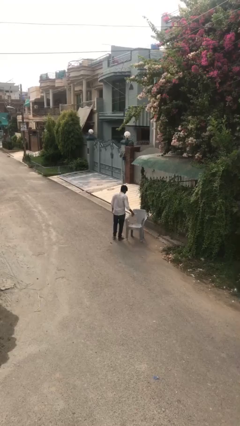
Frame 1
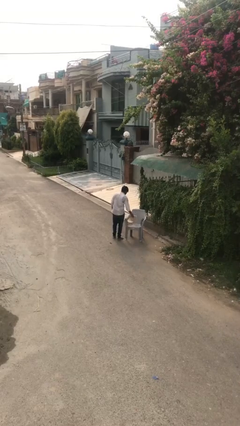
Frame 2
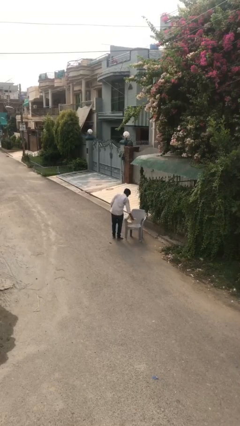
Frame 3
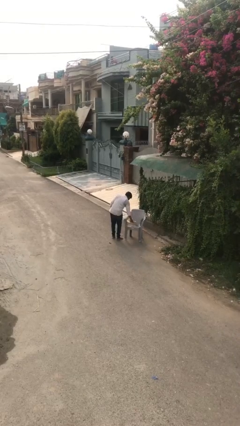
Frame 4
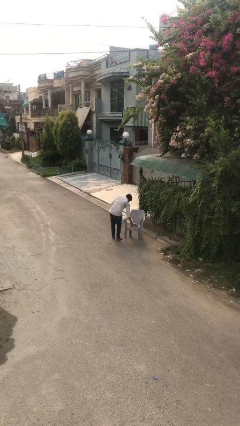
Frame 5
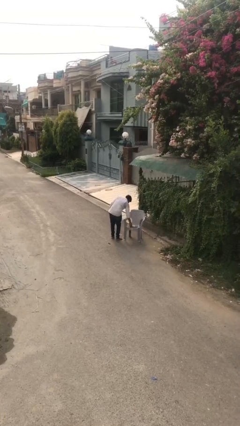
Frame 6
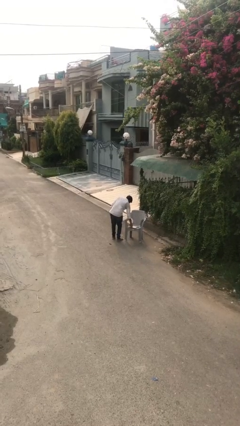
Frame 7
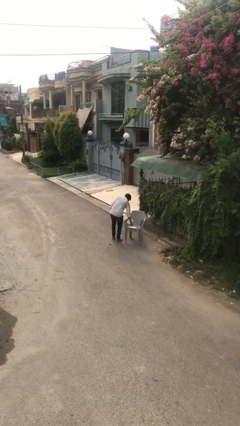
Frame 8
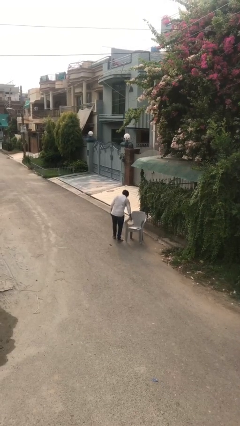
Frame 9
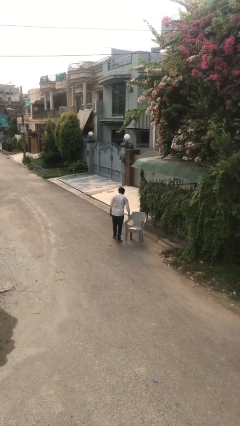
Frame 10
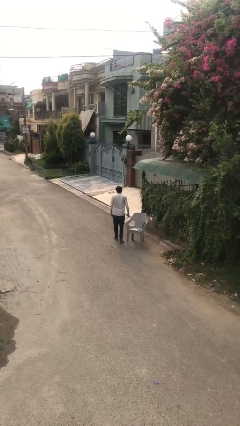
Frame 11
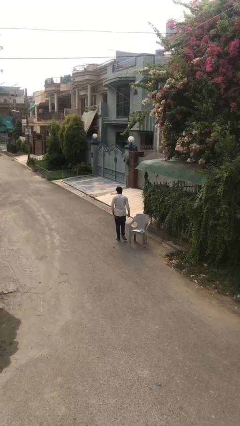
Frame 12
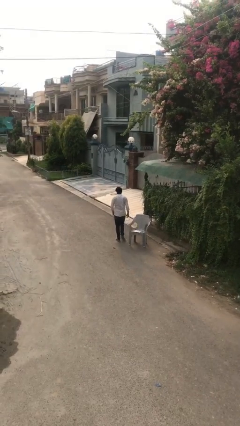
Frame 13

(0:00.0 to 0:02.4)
person puts down object on table

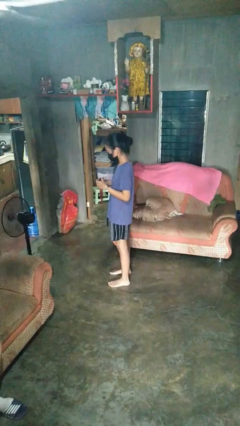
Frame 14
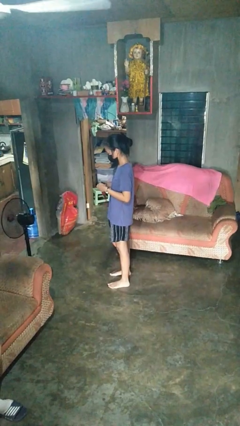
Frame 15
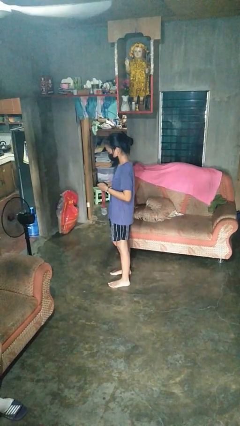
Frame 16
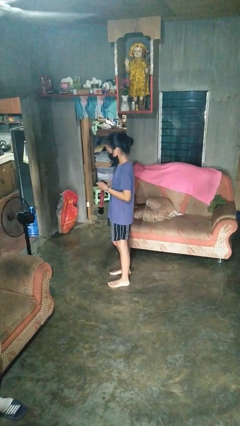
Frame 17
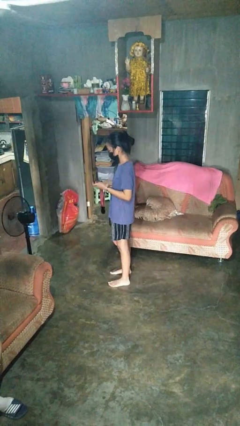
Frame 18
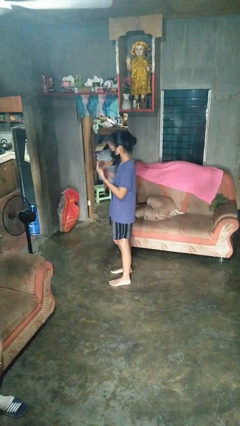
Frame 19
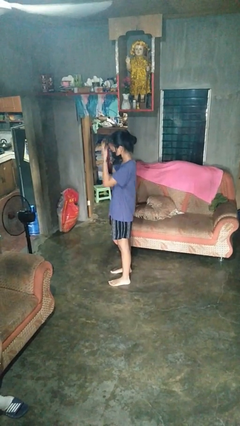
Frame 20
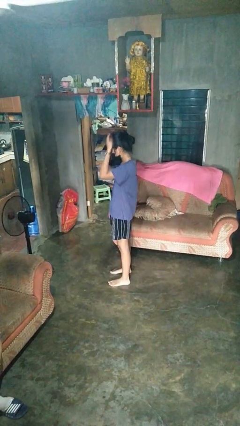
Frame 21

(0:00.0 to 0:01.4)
person puts on necklace

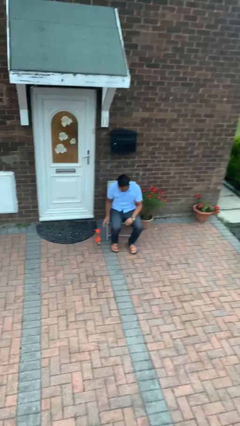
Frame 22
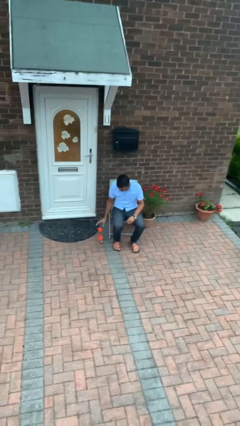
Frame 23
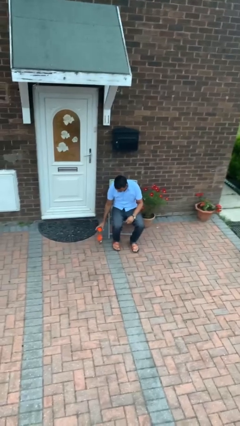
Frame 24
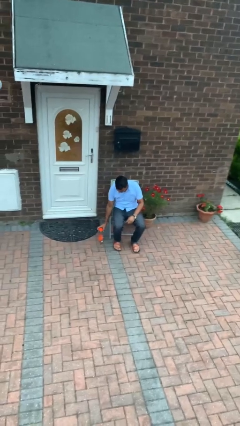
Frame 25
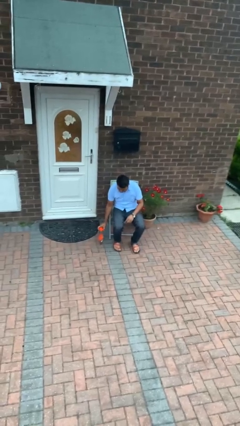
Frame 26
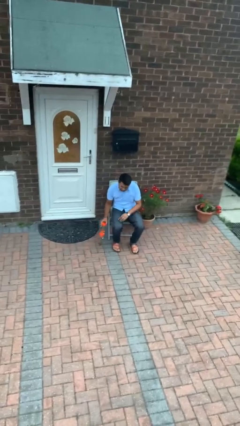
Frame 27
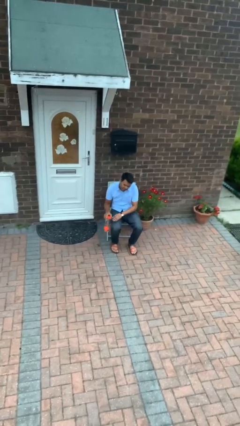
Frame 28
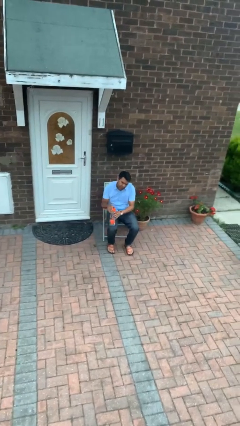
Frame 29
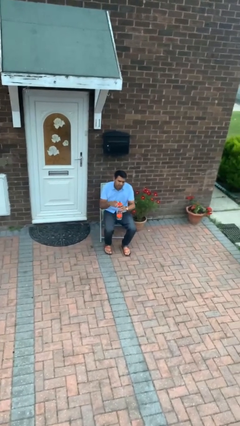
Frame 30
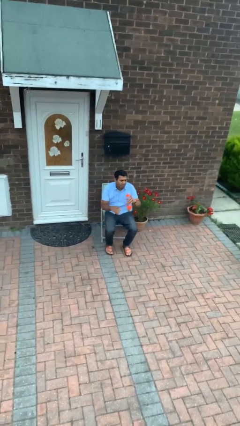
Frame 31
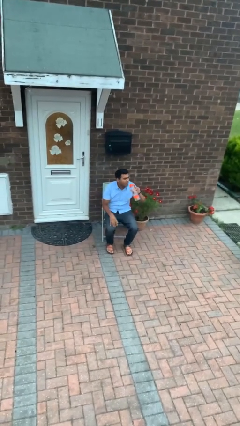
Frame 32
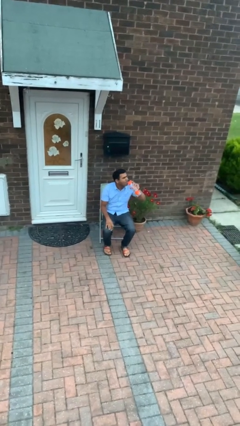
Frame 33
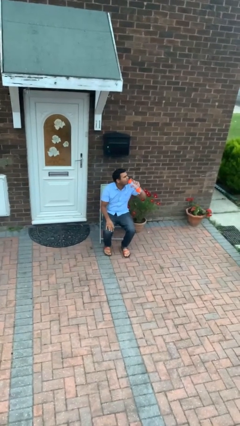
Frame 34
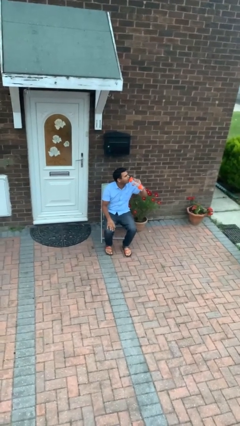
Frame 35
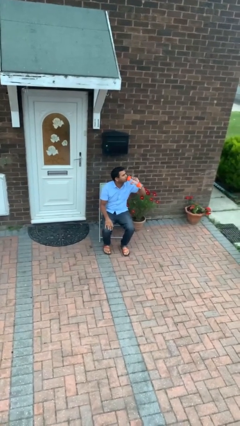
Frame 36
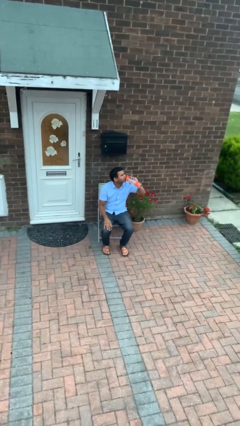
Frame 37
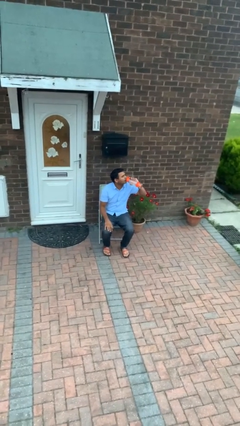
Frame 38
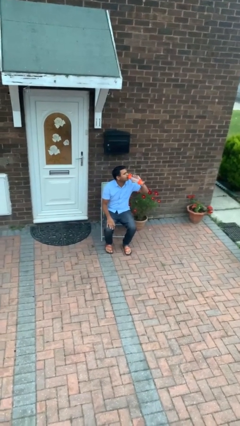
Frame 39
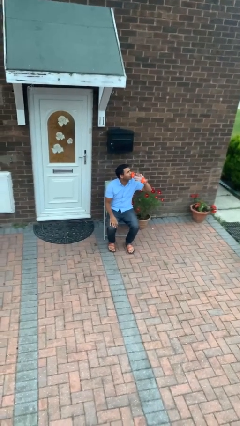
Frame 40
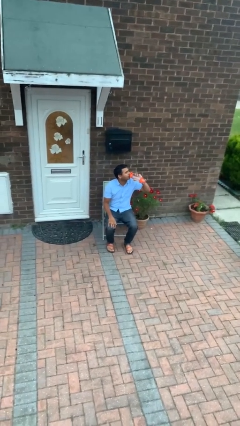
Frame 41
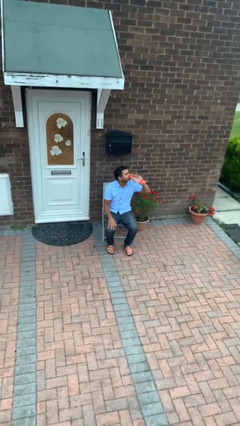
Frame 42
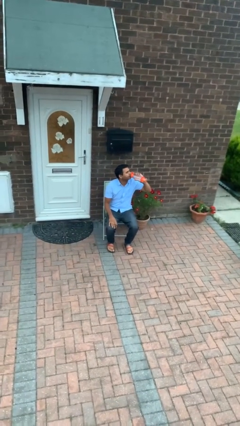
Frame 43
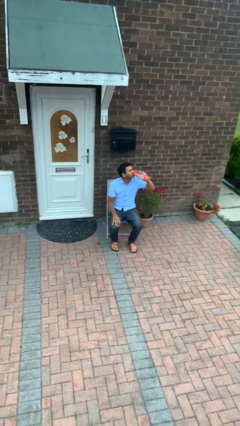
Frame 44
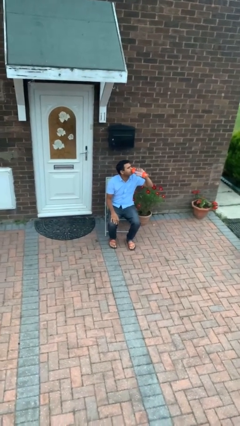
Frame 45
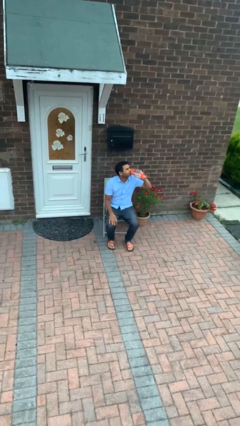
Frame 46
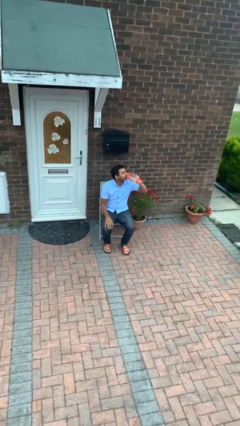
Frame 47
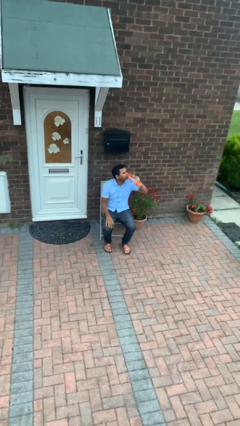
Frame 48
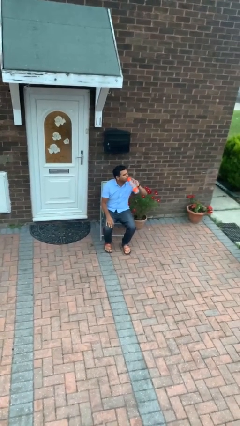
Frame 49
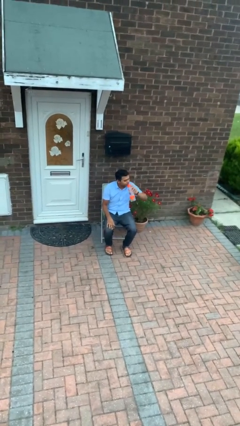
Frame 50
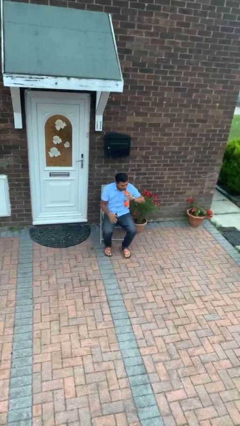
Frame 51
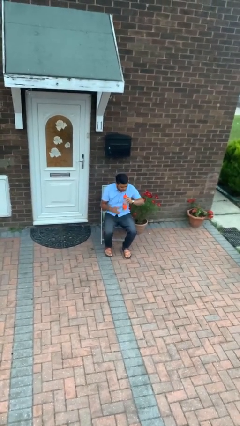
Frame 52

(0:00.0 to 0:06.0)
person drinks from bottle

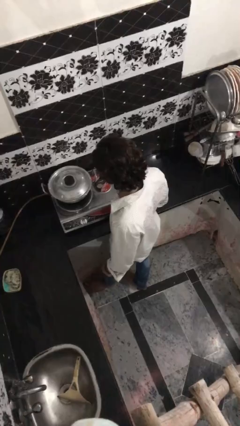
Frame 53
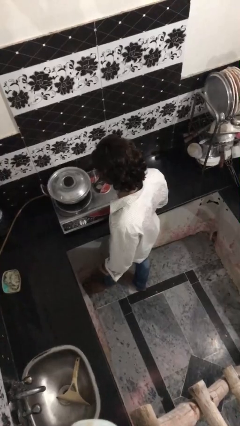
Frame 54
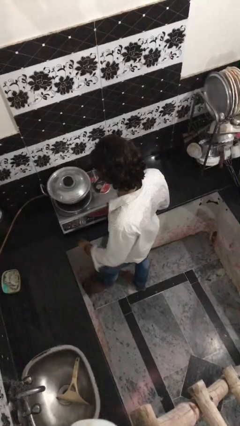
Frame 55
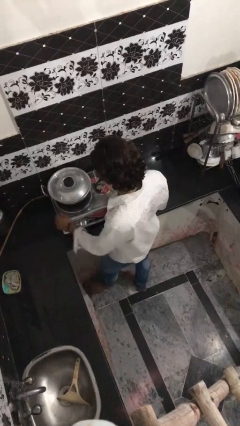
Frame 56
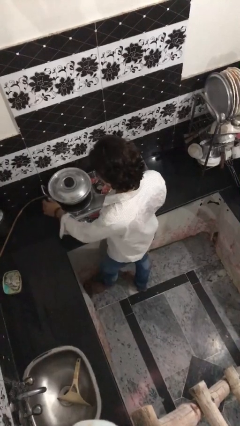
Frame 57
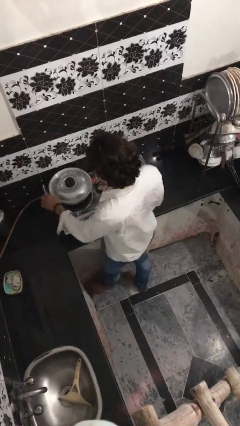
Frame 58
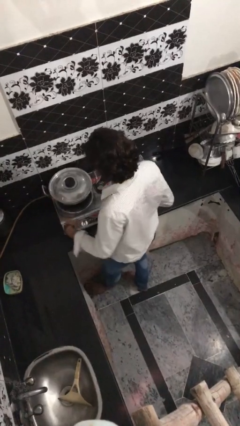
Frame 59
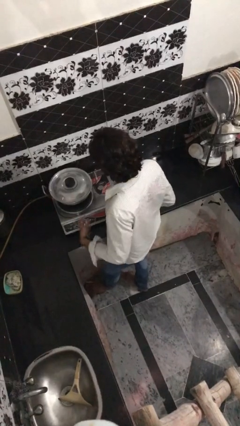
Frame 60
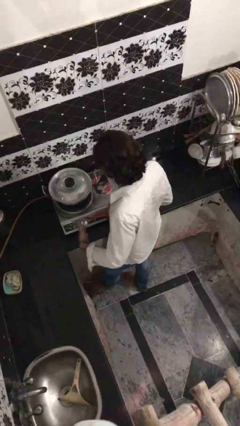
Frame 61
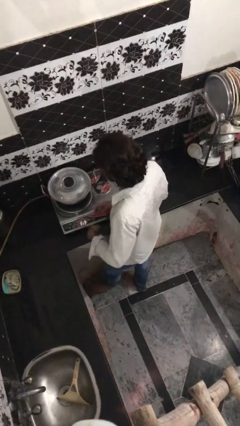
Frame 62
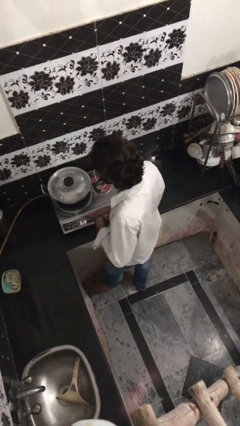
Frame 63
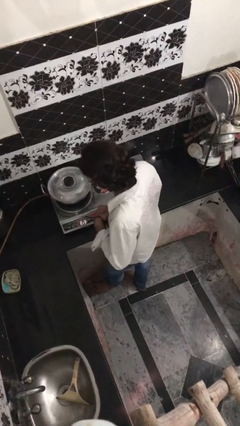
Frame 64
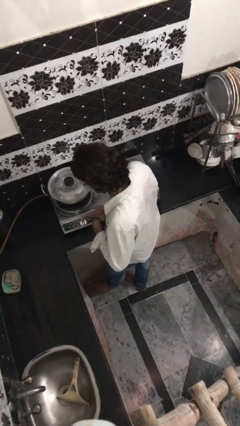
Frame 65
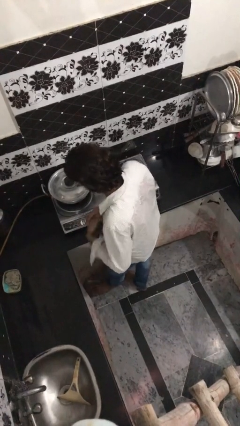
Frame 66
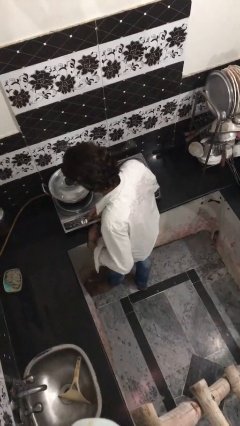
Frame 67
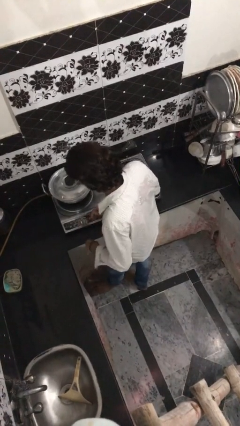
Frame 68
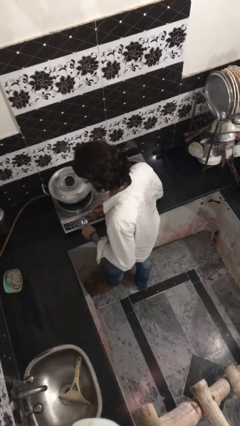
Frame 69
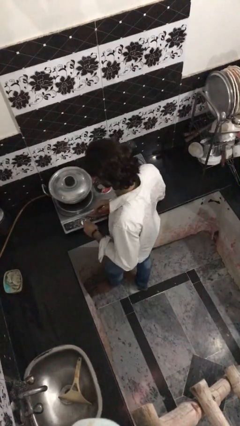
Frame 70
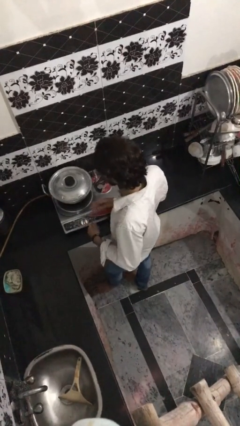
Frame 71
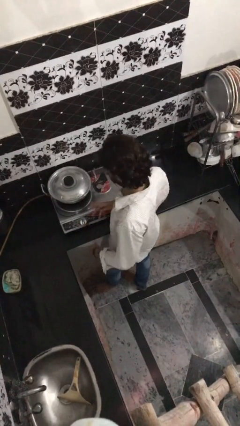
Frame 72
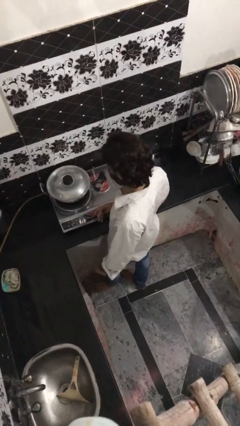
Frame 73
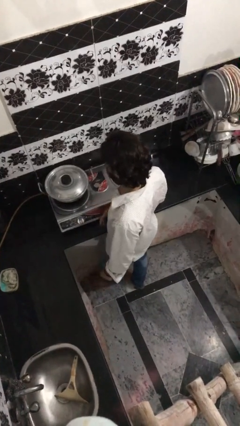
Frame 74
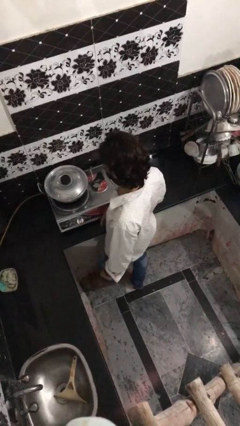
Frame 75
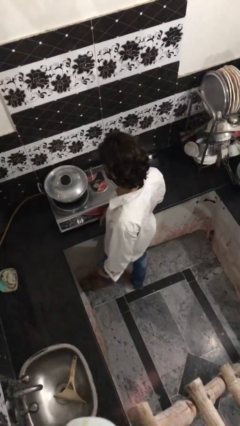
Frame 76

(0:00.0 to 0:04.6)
person burns hand

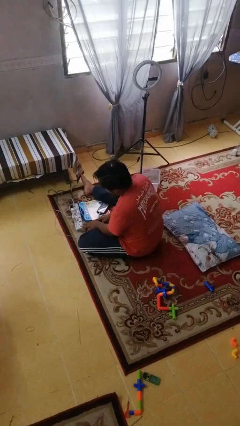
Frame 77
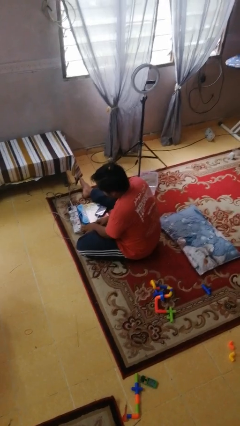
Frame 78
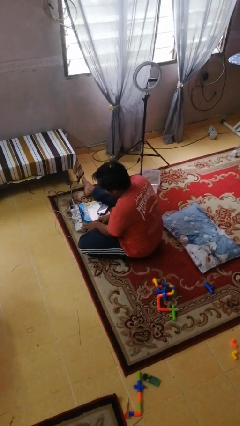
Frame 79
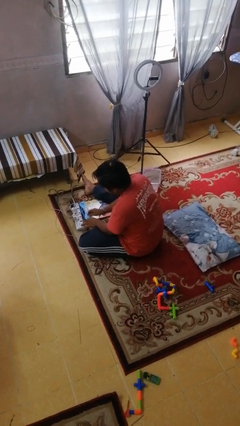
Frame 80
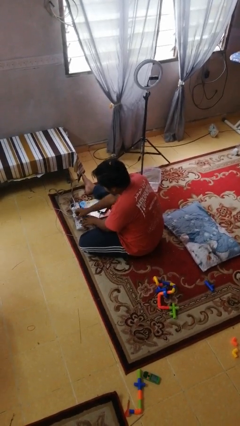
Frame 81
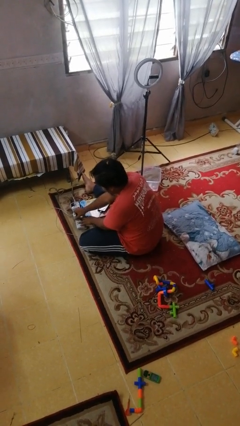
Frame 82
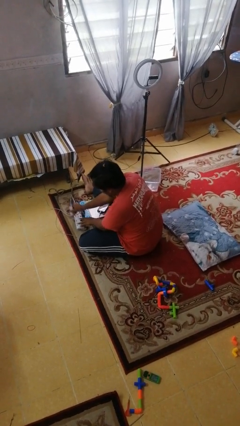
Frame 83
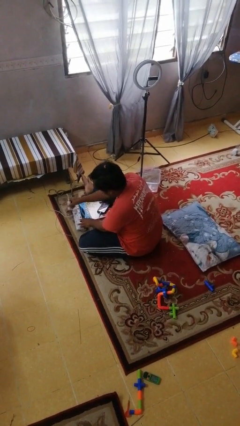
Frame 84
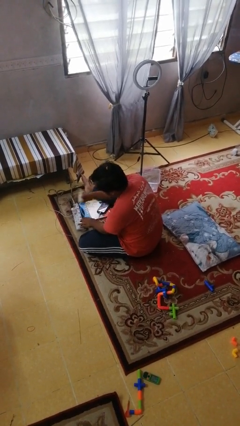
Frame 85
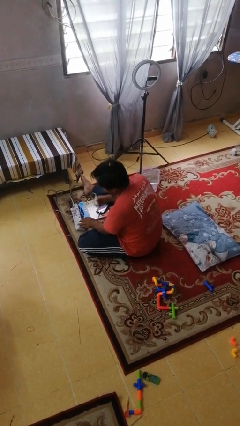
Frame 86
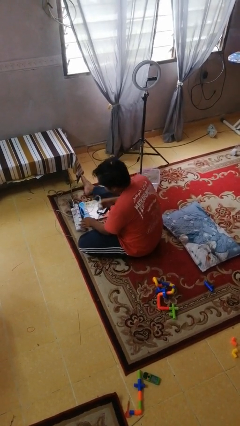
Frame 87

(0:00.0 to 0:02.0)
person unplugs from electrical socket

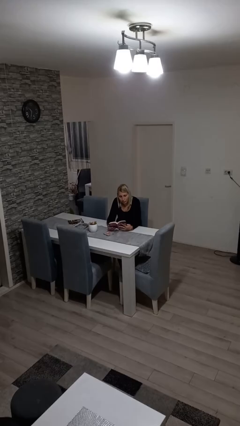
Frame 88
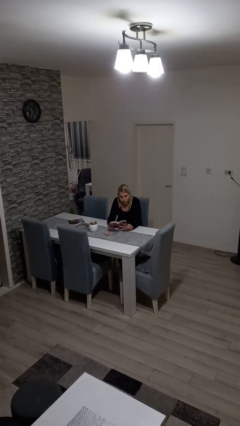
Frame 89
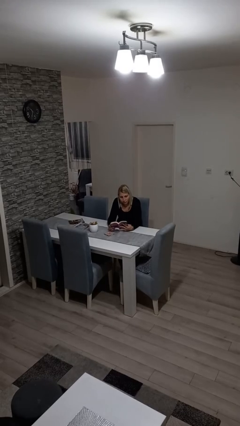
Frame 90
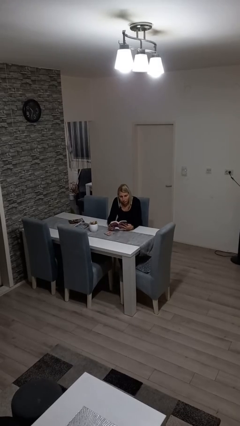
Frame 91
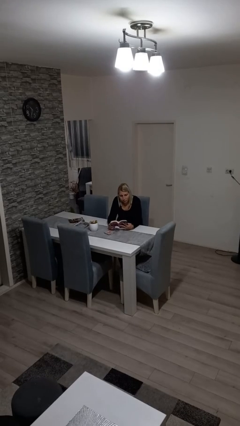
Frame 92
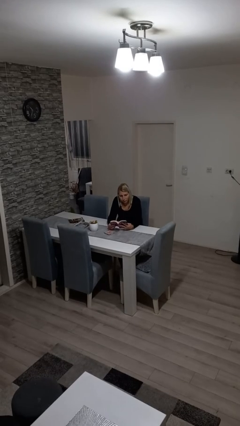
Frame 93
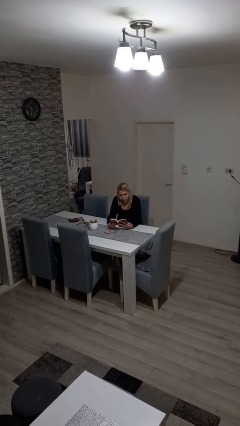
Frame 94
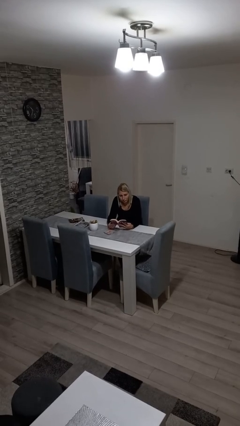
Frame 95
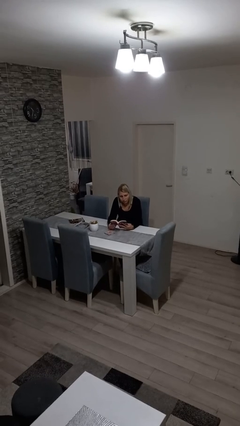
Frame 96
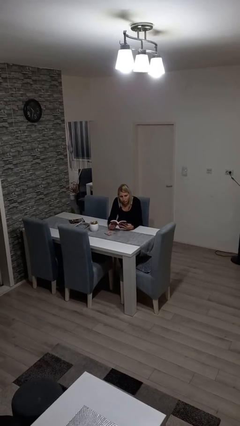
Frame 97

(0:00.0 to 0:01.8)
person reads book
